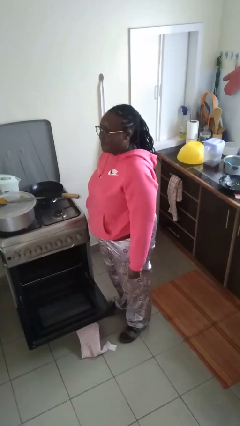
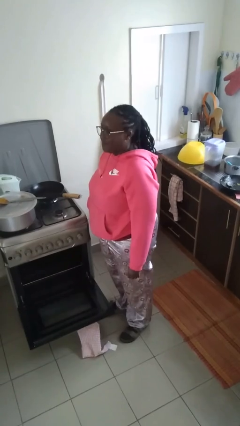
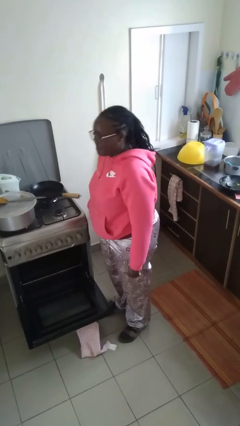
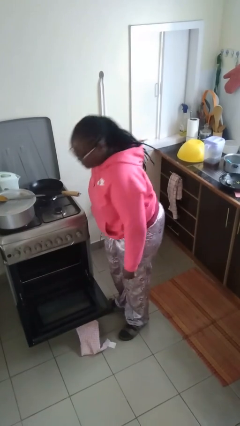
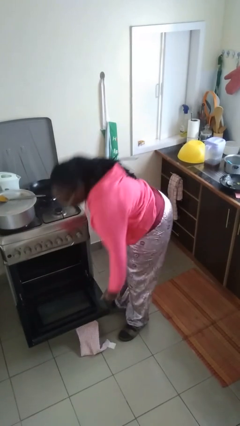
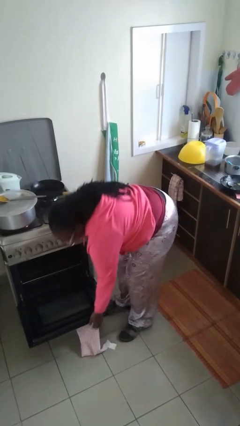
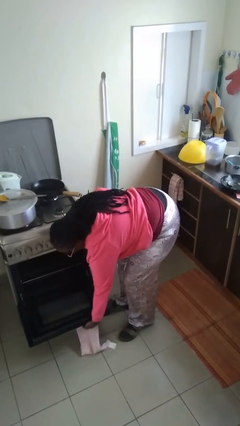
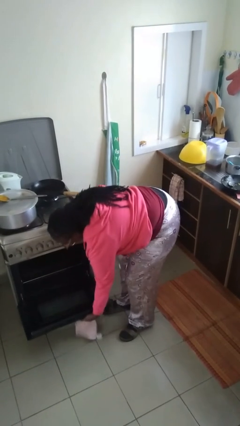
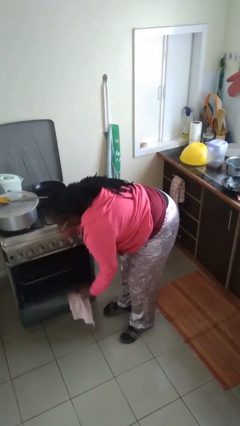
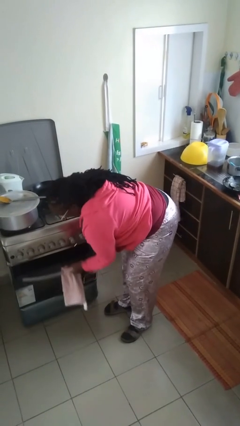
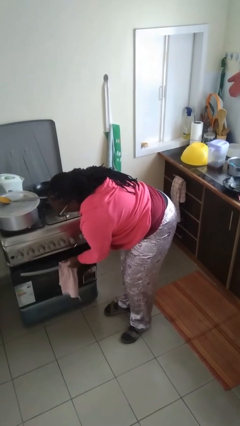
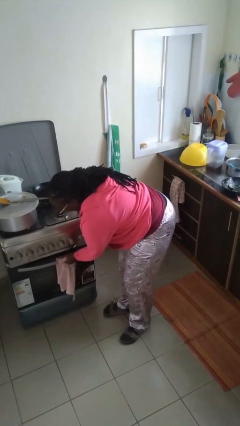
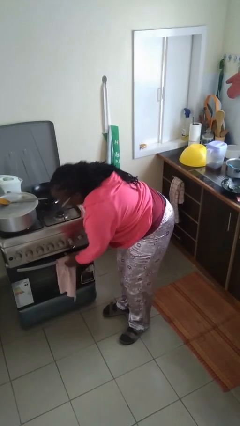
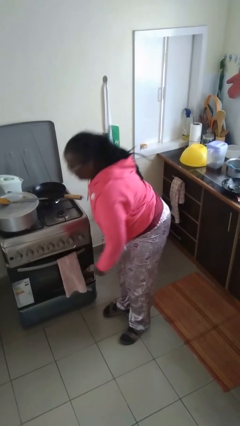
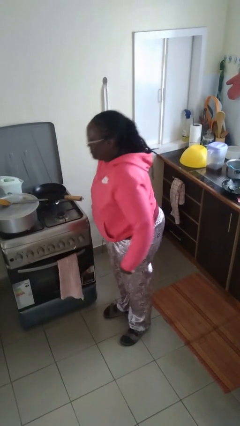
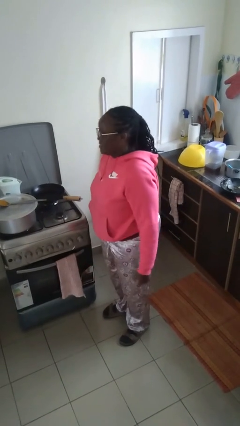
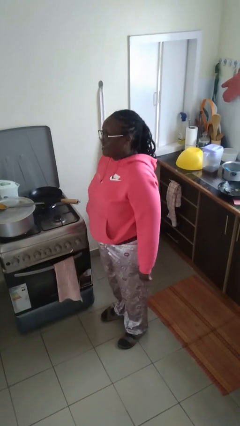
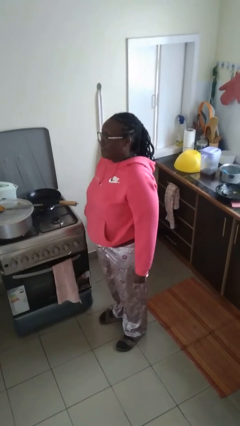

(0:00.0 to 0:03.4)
person closes oven door

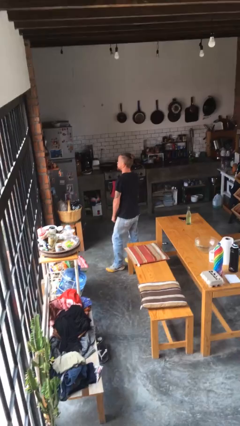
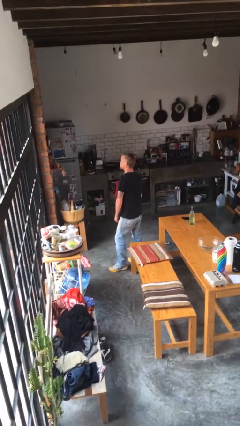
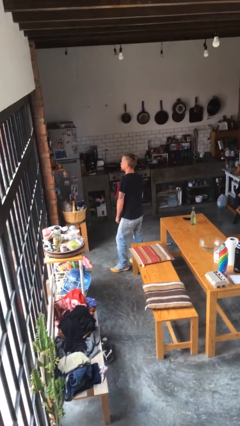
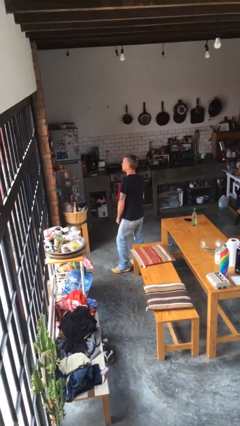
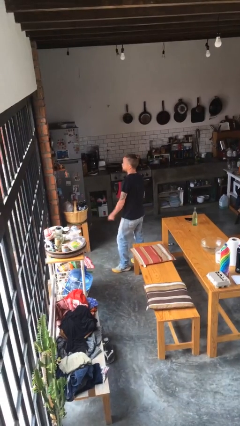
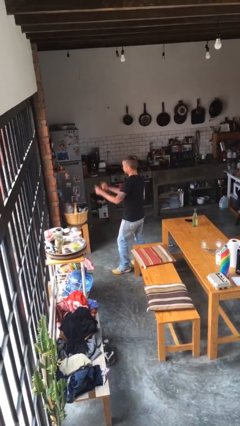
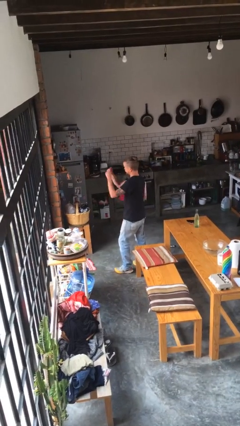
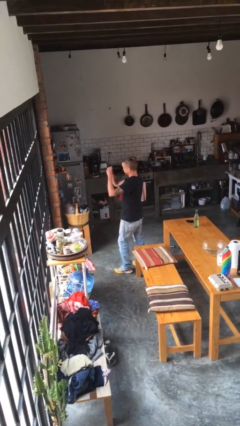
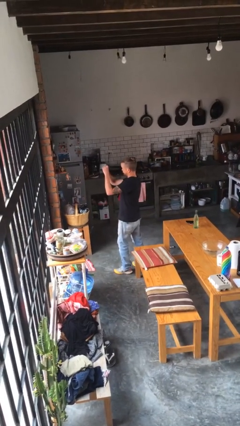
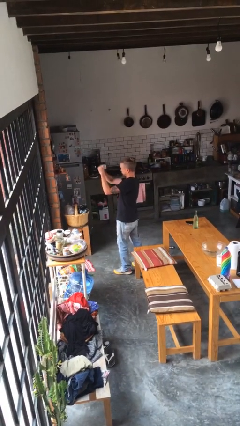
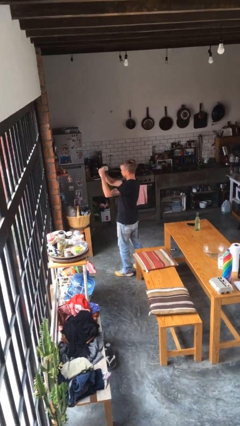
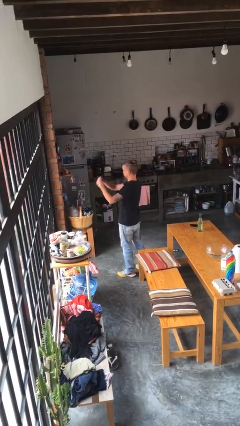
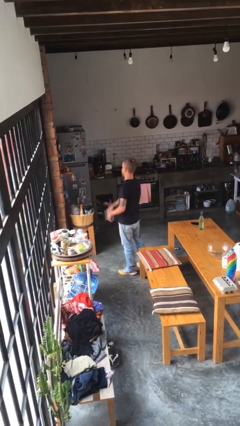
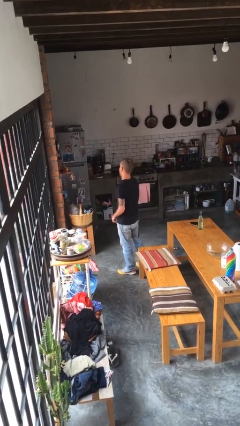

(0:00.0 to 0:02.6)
person gestures heart

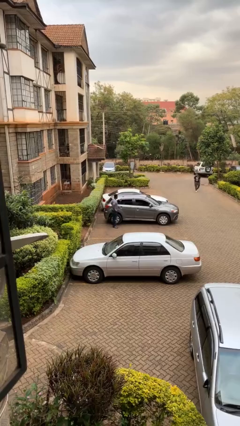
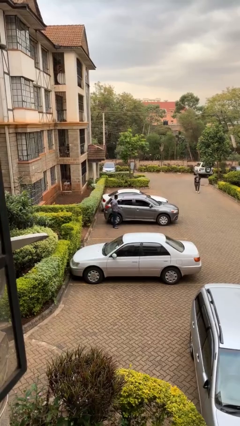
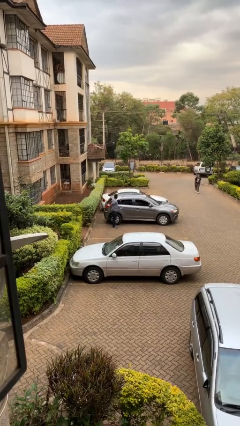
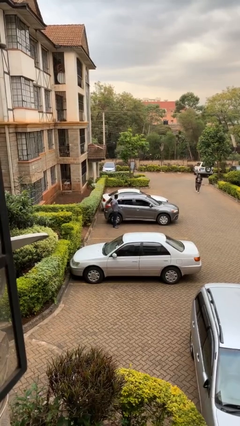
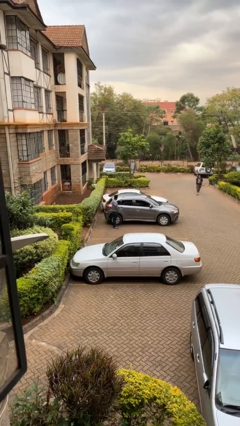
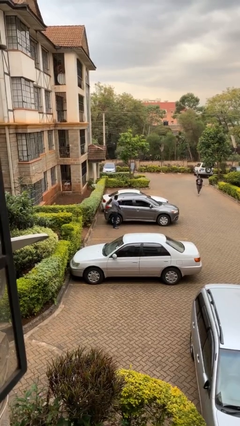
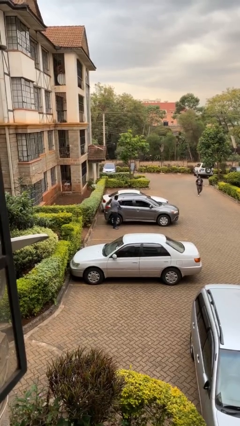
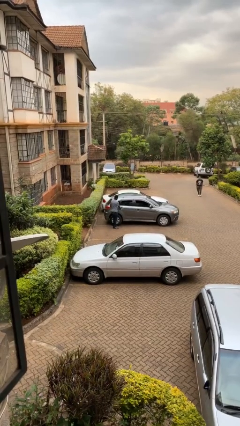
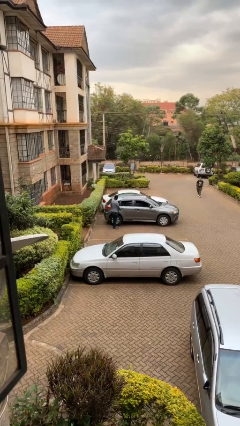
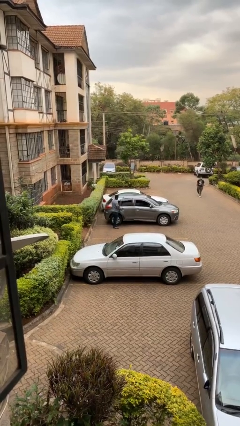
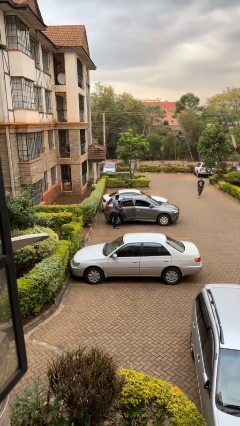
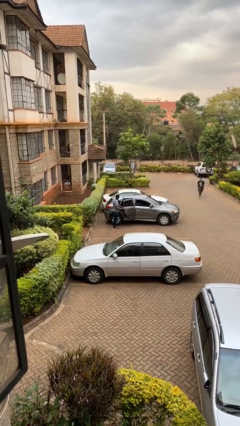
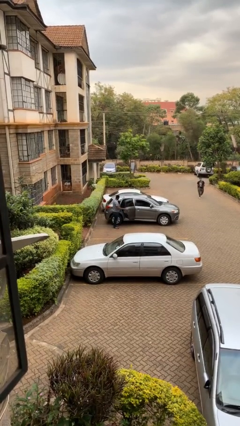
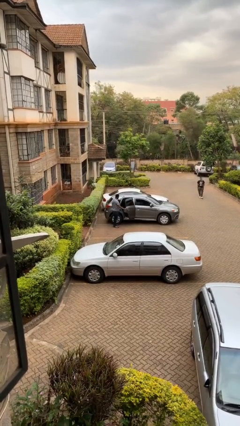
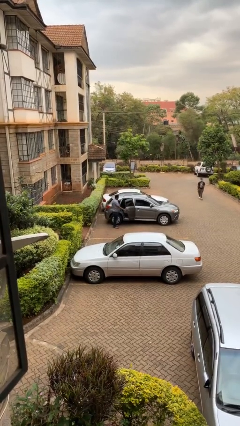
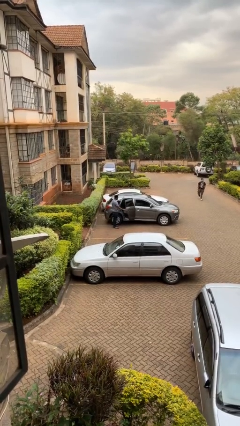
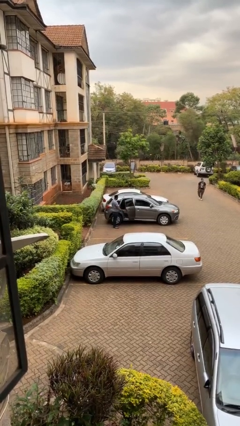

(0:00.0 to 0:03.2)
person opens car door

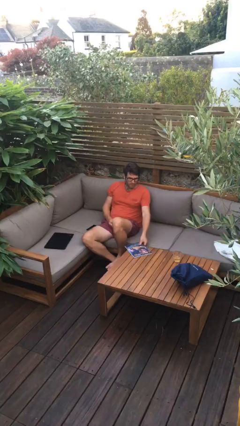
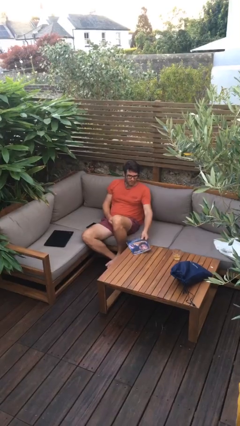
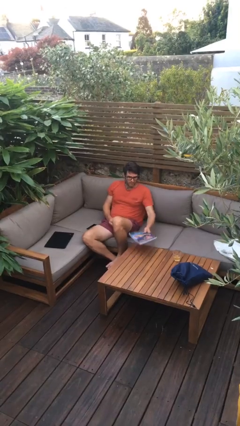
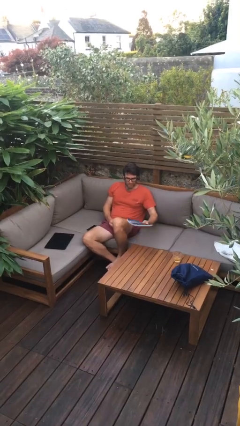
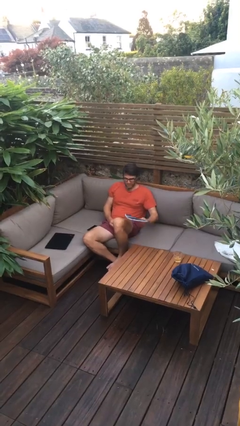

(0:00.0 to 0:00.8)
person picks up object from table

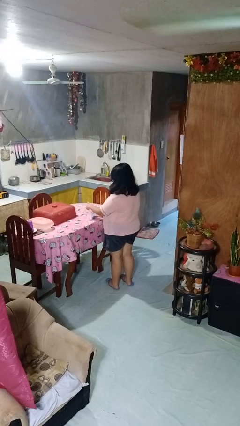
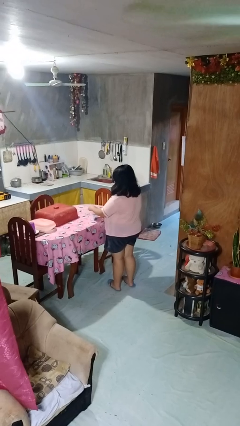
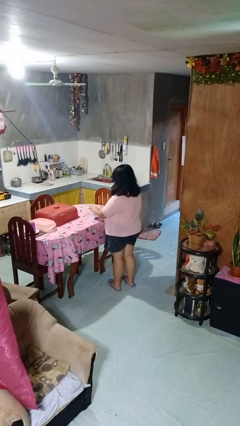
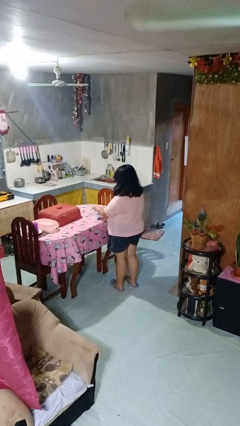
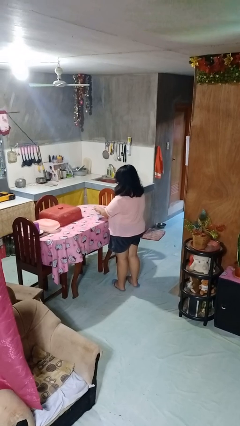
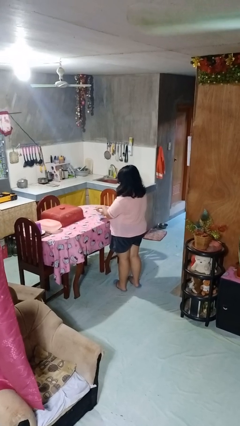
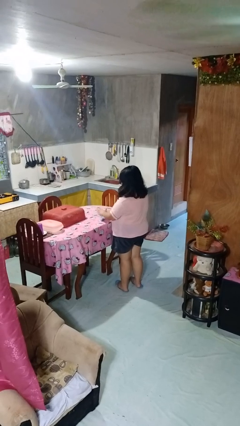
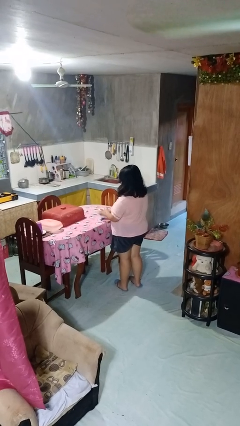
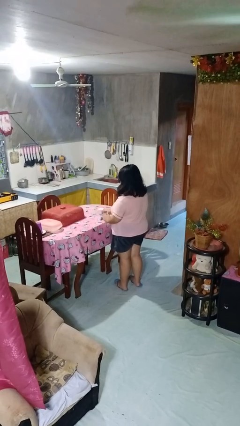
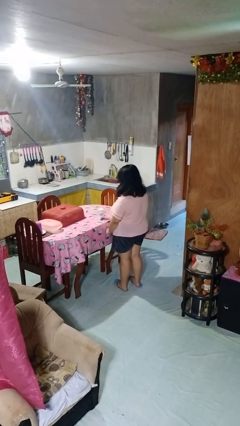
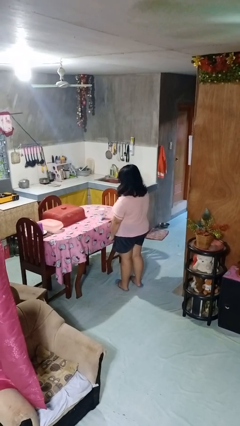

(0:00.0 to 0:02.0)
person closes jar

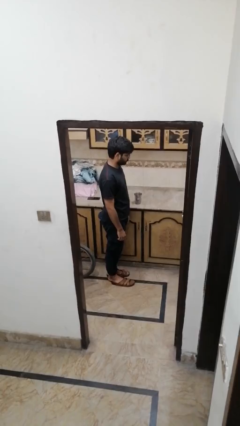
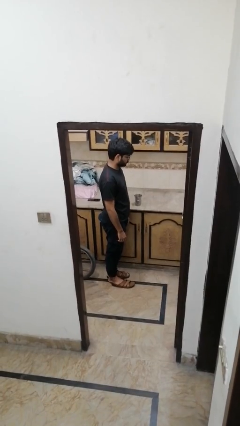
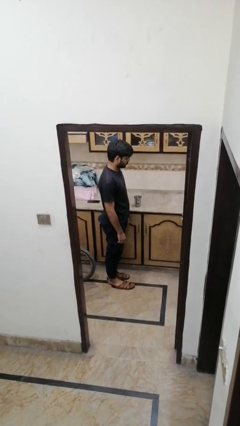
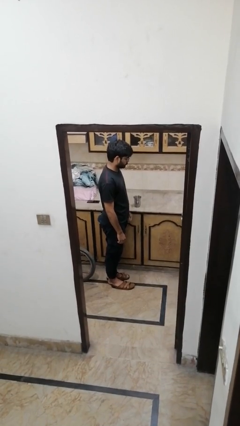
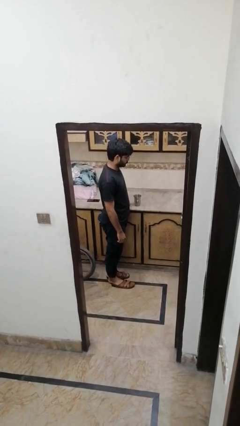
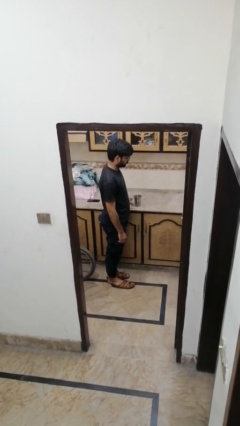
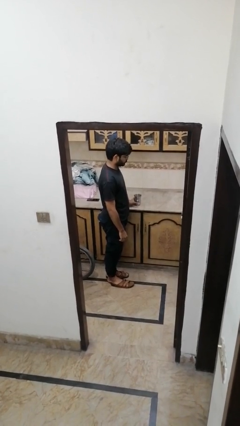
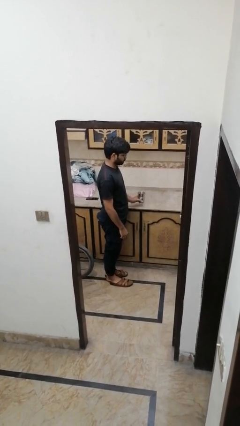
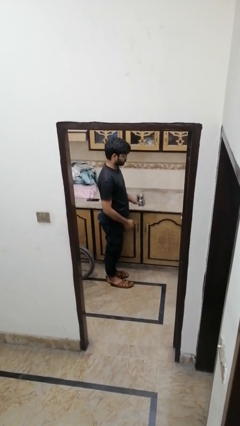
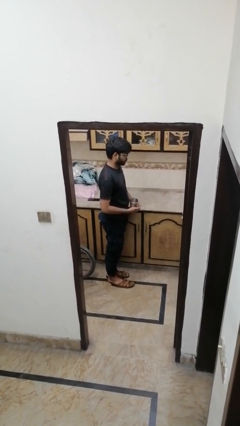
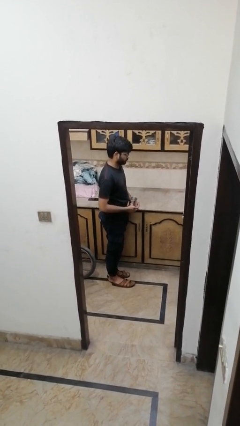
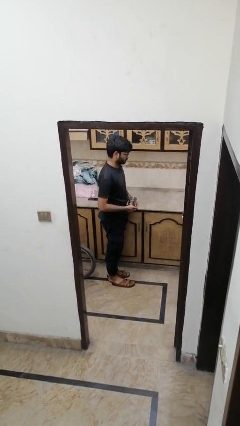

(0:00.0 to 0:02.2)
person picks up object from countertop

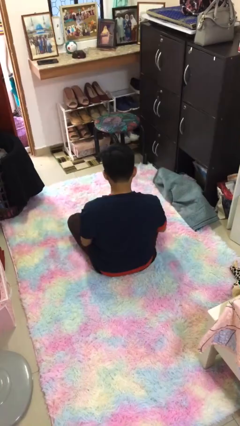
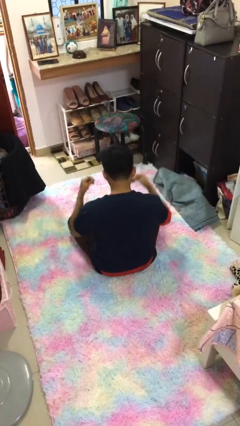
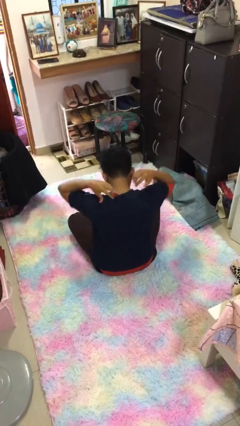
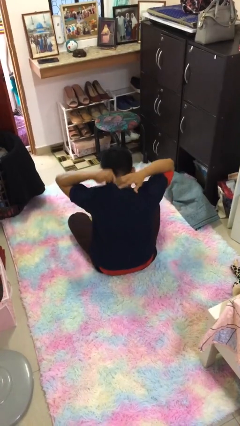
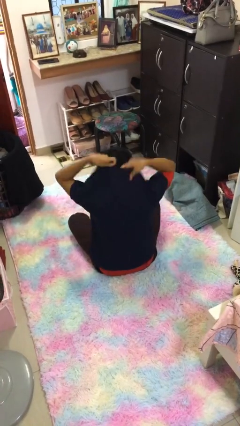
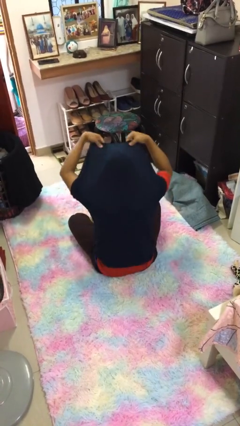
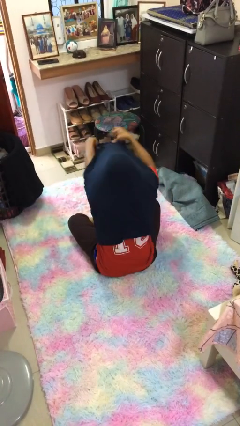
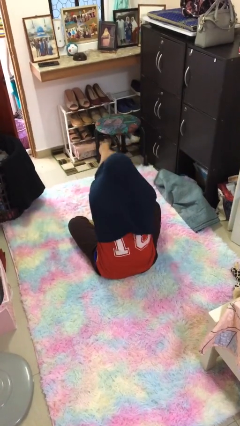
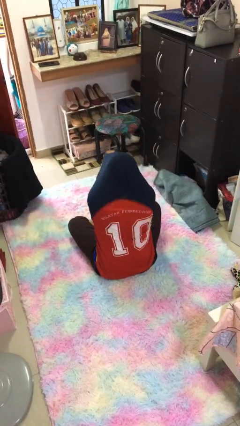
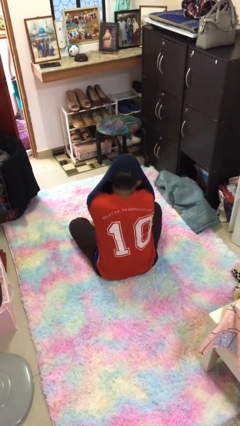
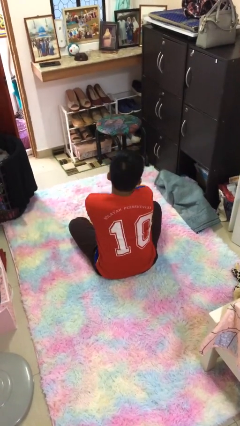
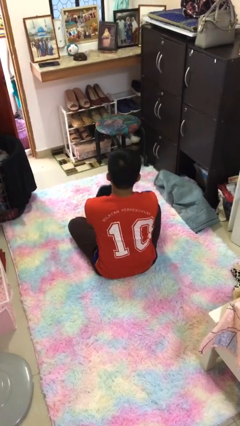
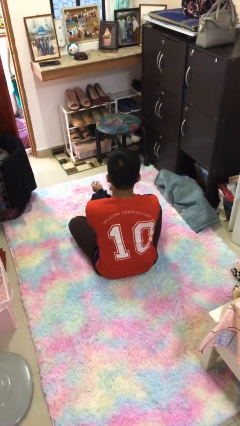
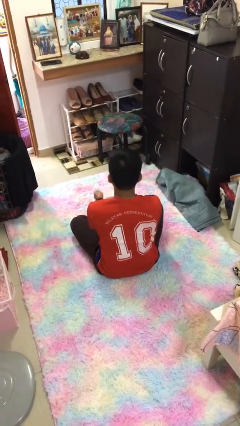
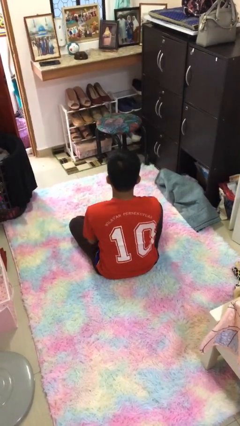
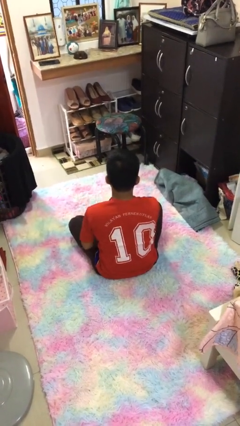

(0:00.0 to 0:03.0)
person takes off shirt
